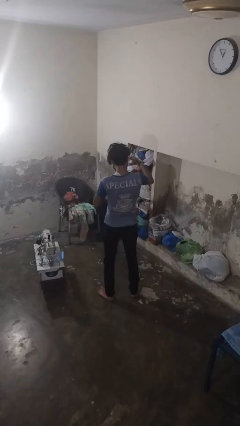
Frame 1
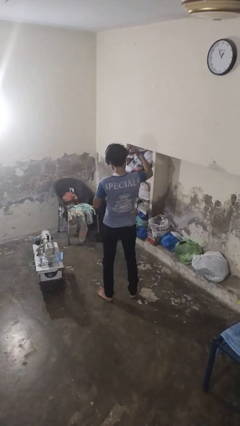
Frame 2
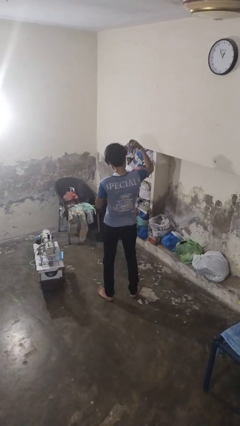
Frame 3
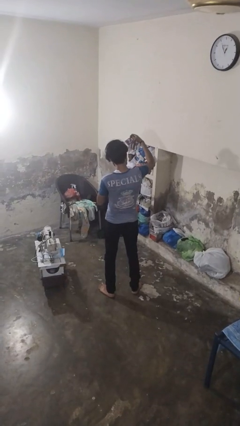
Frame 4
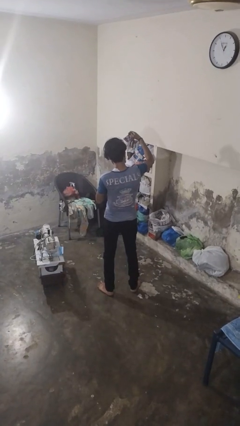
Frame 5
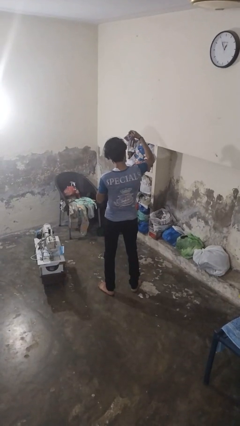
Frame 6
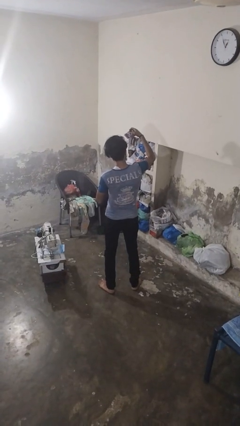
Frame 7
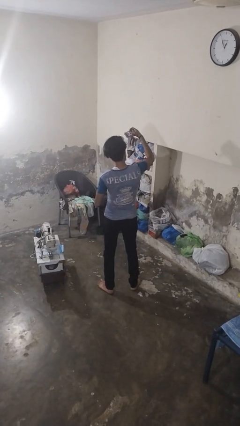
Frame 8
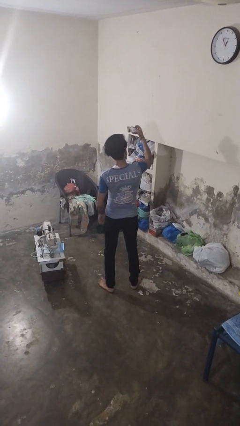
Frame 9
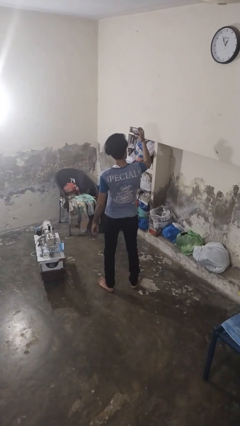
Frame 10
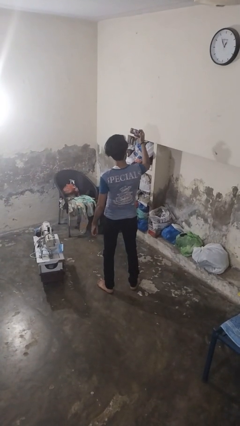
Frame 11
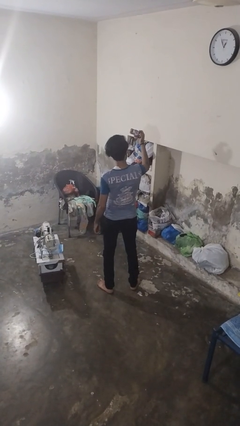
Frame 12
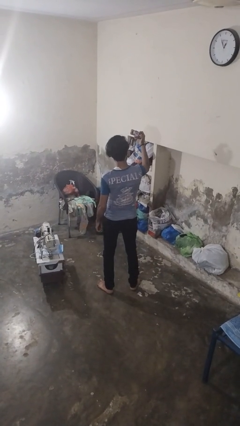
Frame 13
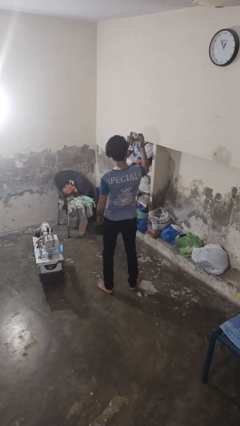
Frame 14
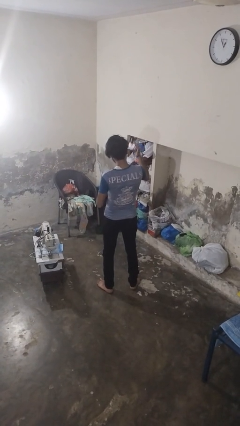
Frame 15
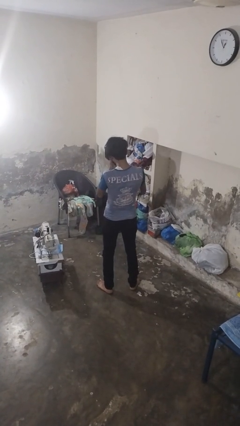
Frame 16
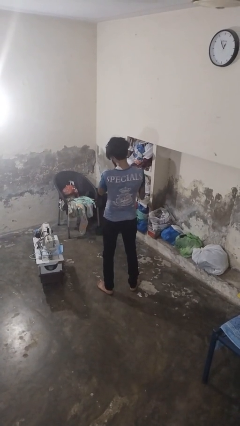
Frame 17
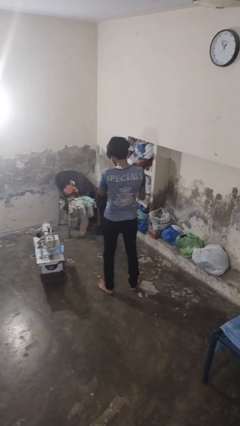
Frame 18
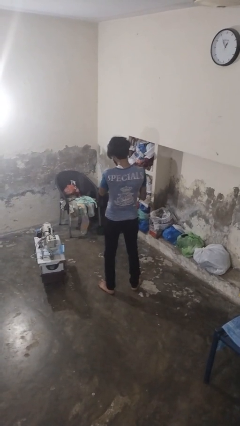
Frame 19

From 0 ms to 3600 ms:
person takes selfie

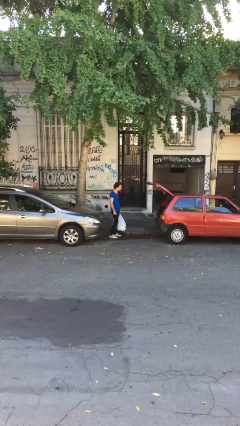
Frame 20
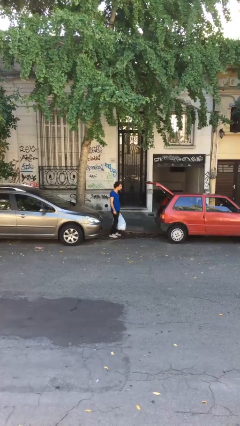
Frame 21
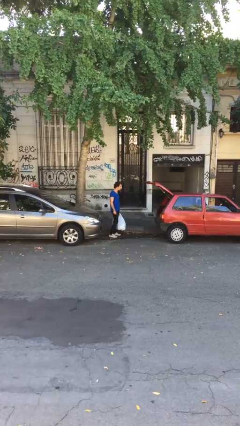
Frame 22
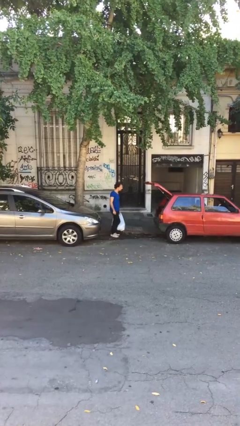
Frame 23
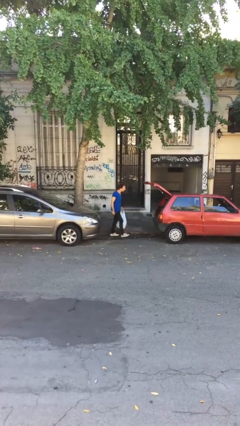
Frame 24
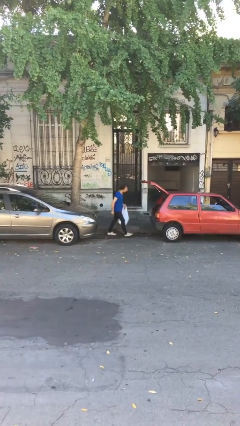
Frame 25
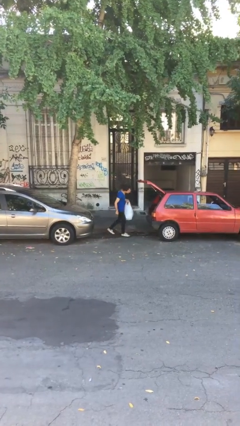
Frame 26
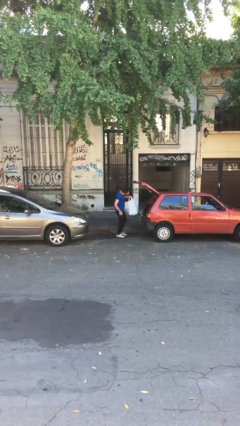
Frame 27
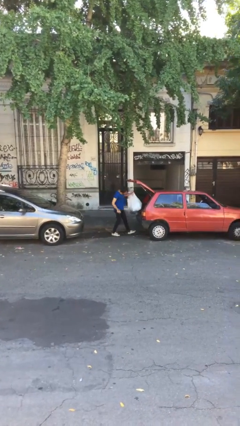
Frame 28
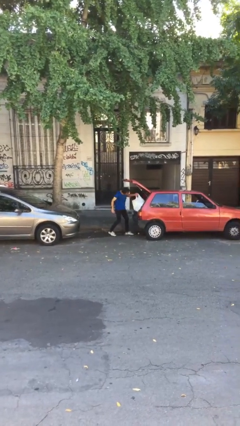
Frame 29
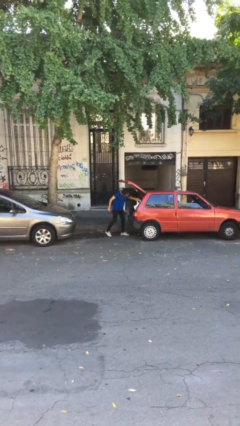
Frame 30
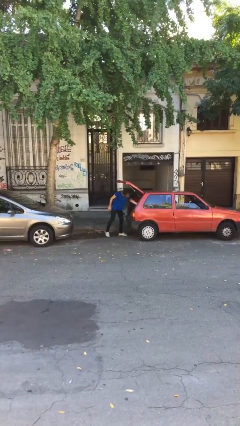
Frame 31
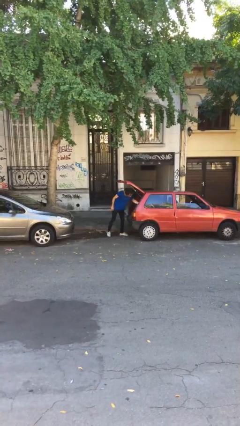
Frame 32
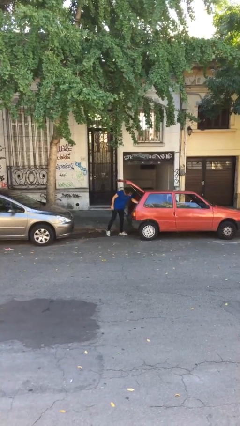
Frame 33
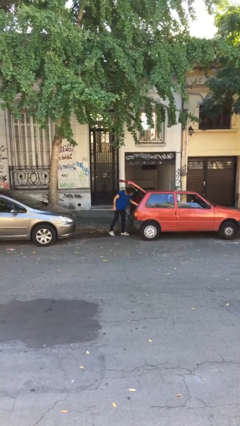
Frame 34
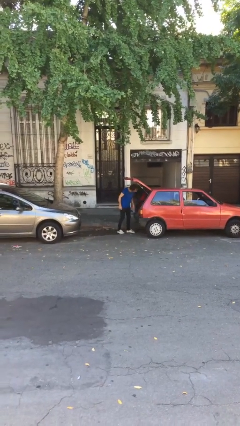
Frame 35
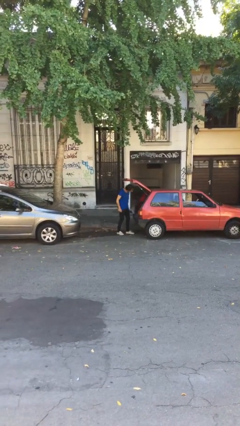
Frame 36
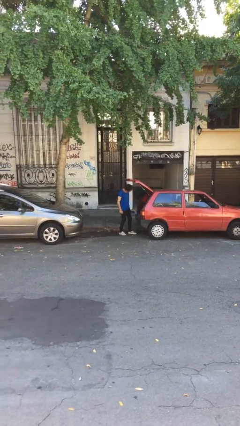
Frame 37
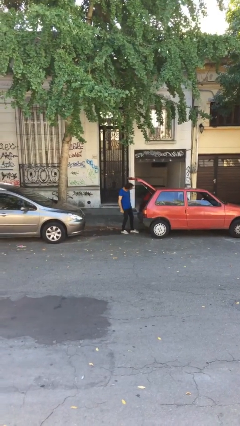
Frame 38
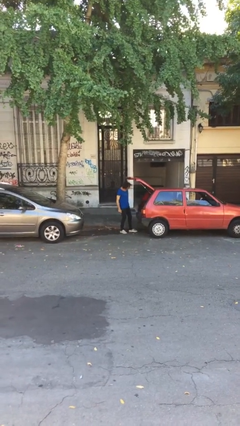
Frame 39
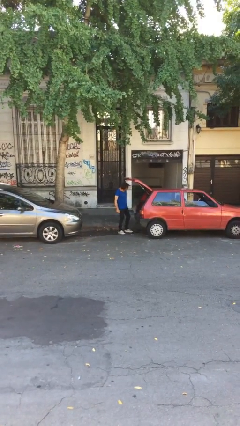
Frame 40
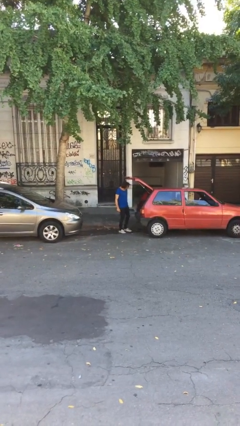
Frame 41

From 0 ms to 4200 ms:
person loads car

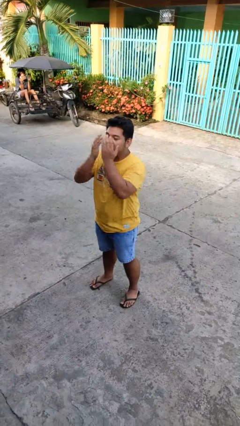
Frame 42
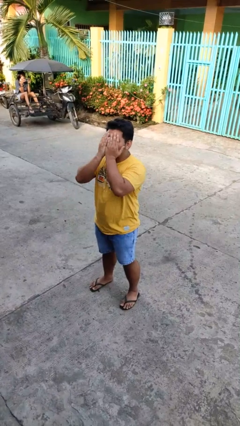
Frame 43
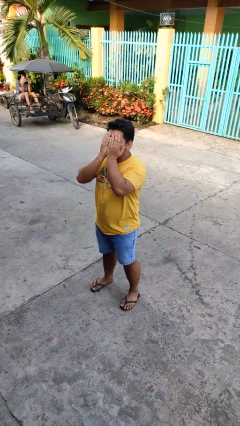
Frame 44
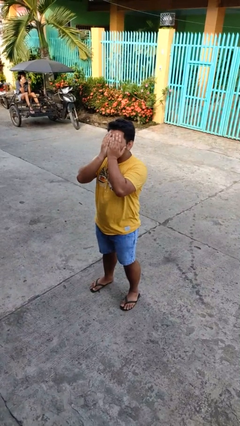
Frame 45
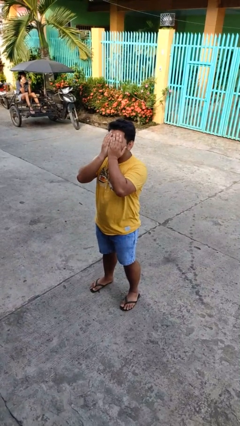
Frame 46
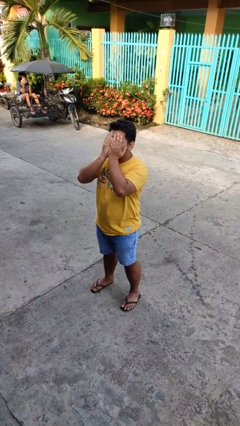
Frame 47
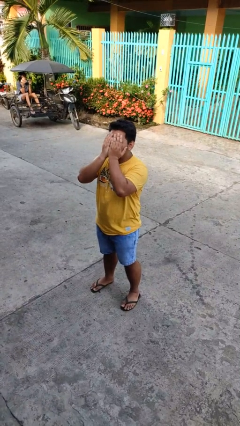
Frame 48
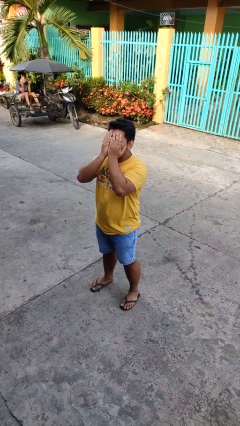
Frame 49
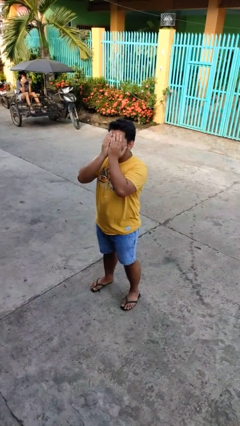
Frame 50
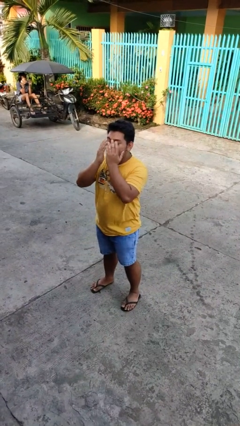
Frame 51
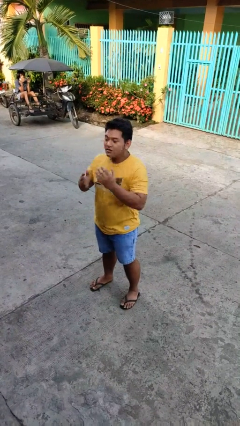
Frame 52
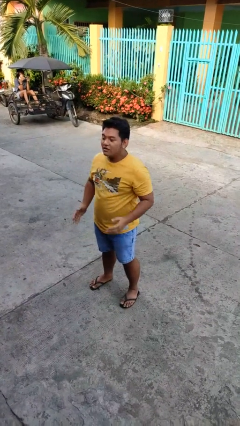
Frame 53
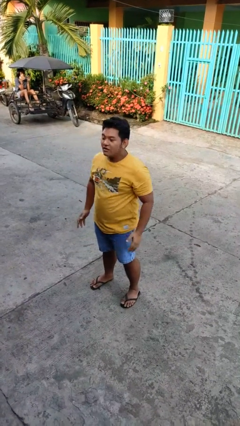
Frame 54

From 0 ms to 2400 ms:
person covers face with hands

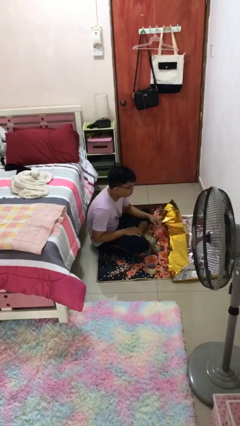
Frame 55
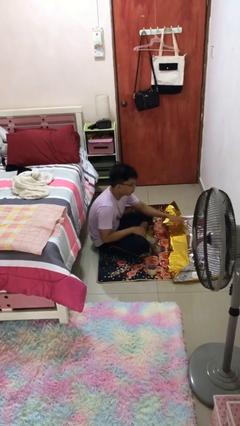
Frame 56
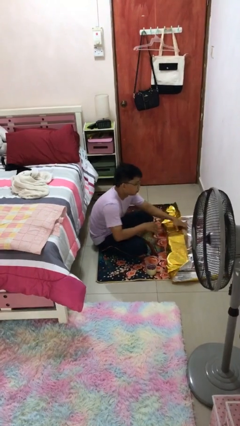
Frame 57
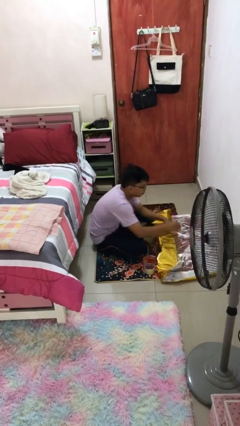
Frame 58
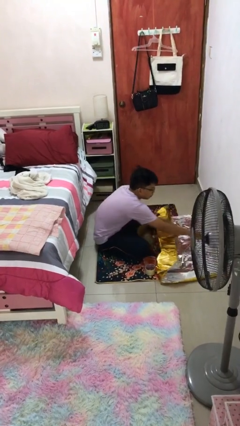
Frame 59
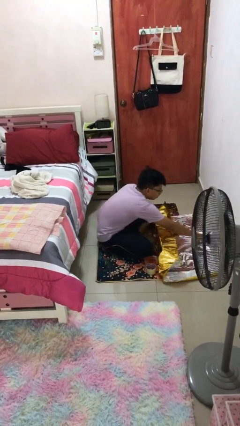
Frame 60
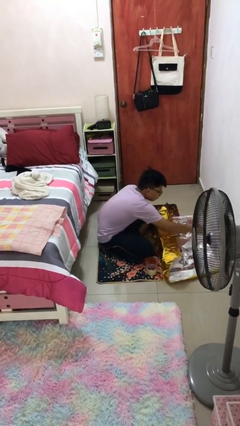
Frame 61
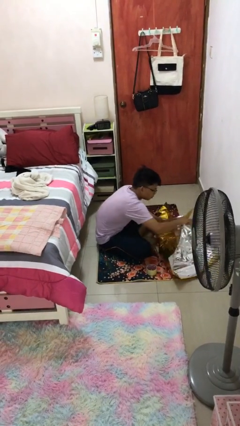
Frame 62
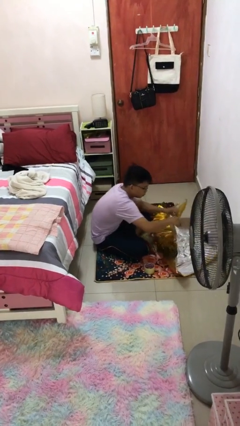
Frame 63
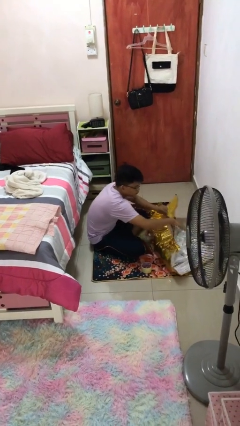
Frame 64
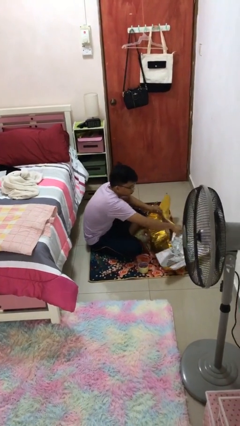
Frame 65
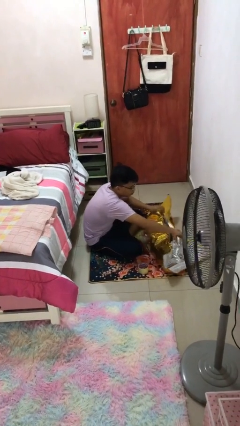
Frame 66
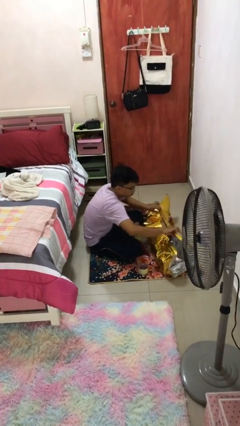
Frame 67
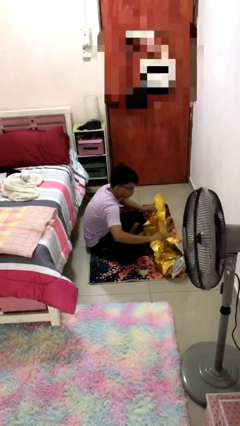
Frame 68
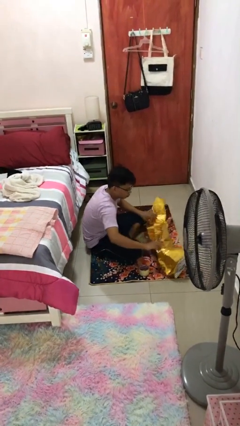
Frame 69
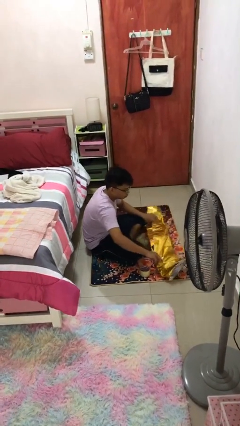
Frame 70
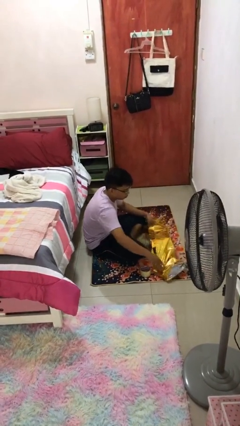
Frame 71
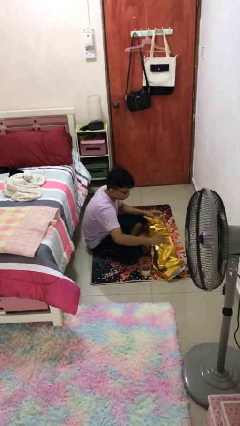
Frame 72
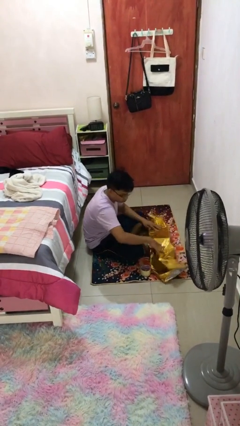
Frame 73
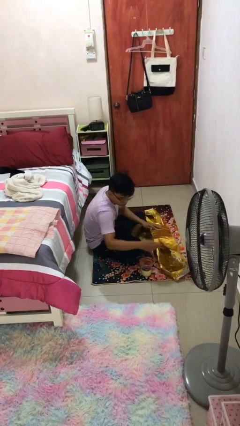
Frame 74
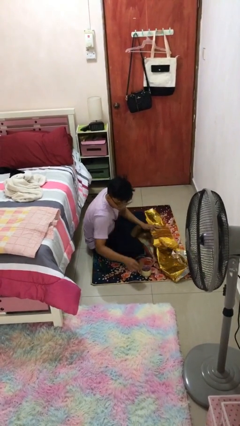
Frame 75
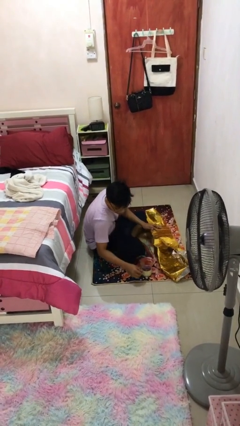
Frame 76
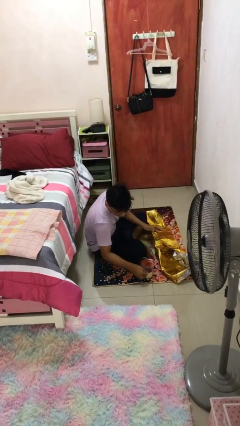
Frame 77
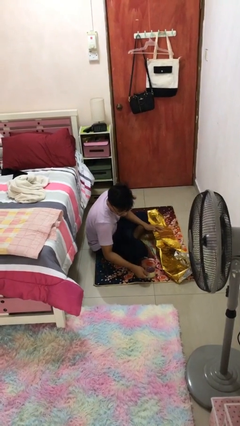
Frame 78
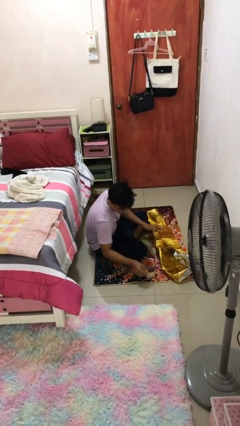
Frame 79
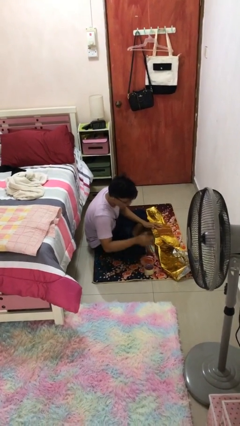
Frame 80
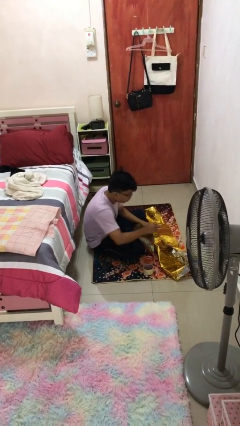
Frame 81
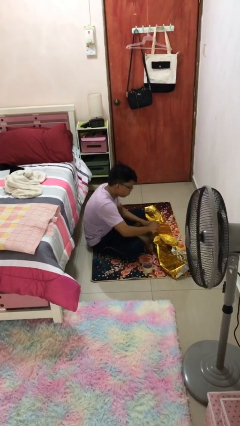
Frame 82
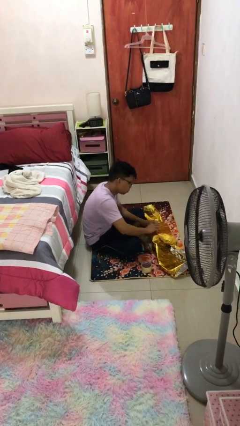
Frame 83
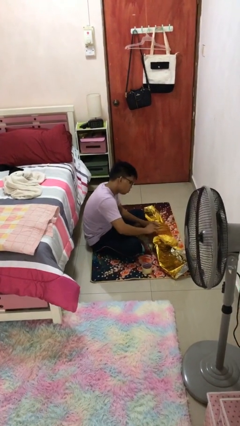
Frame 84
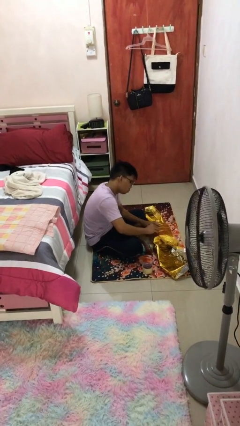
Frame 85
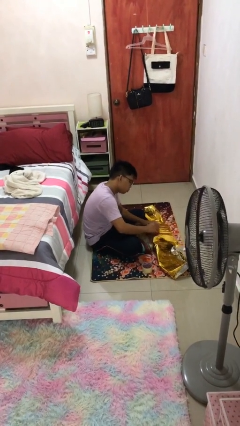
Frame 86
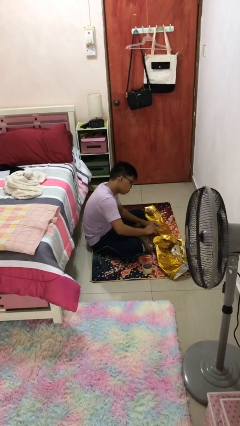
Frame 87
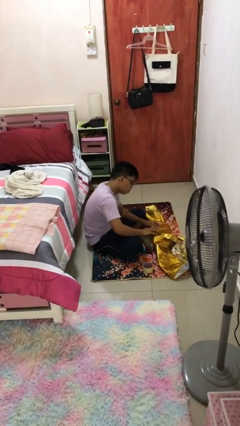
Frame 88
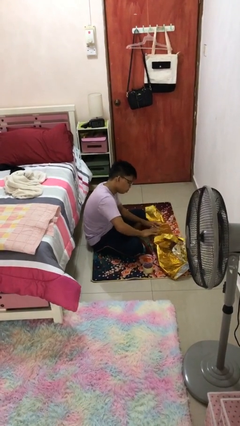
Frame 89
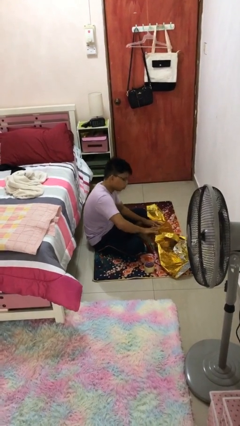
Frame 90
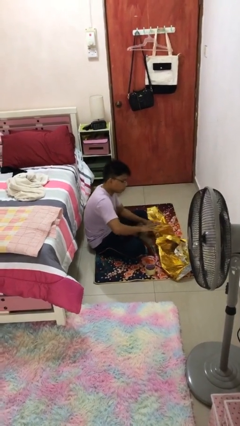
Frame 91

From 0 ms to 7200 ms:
person wraps box
